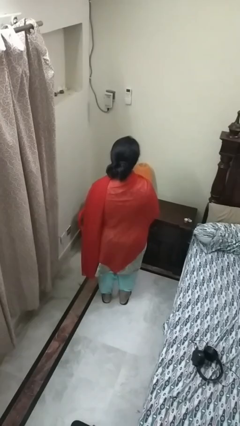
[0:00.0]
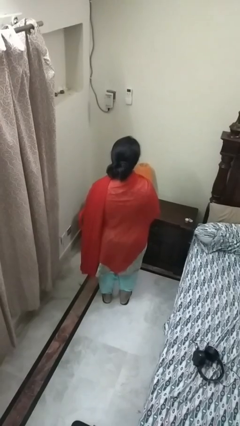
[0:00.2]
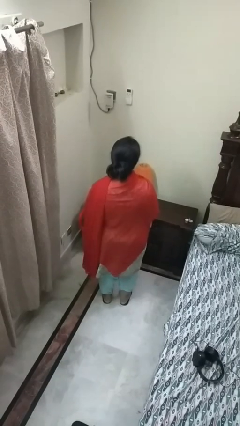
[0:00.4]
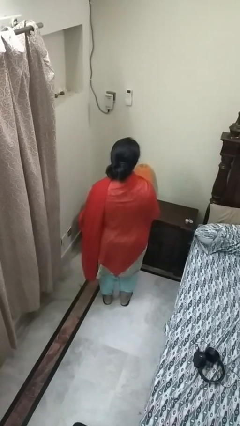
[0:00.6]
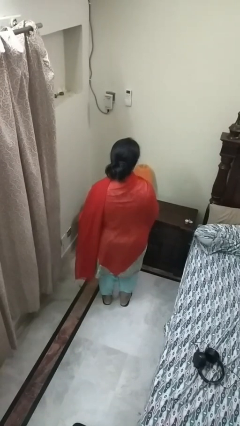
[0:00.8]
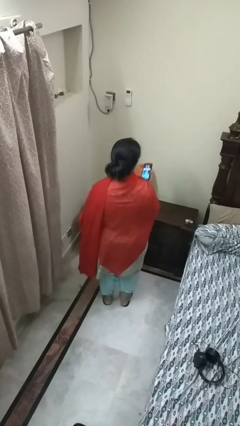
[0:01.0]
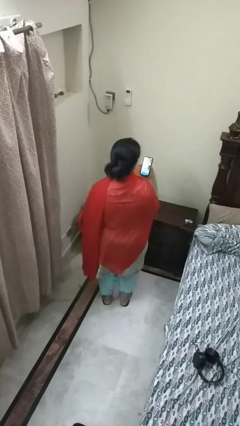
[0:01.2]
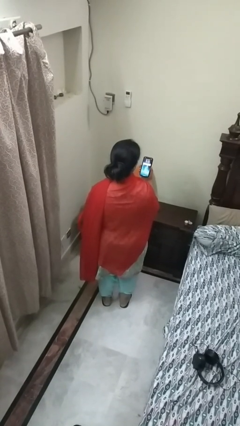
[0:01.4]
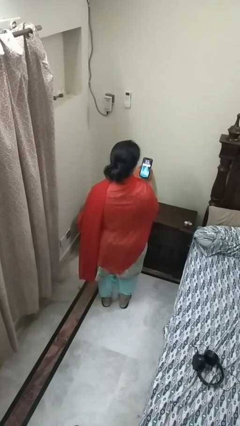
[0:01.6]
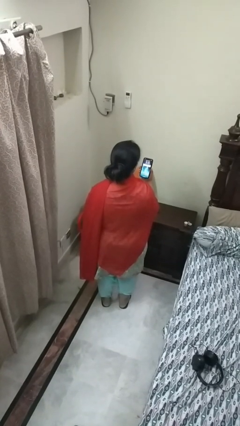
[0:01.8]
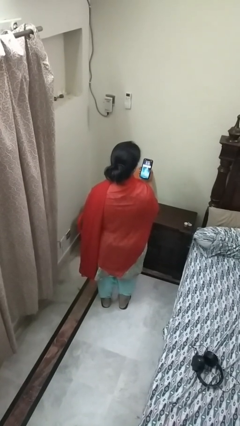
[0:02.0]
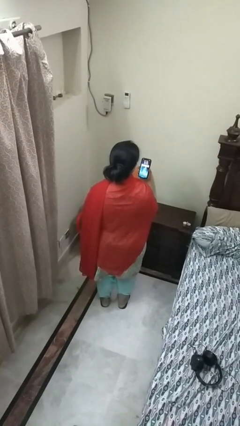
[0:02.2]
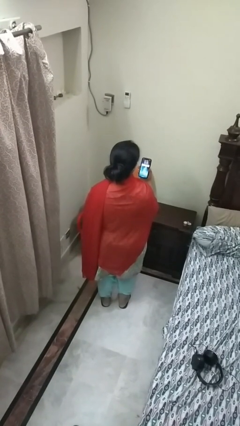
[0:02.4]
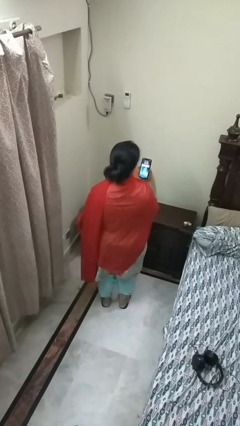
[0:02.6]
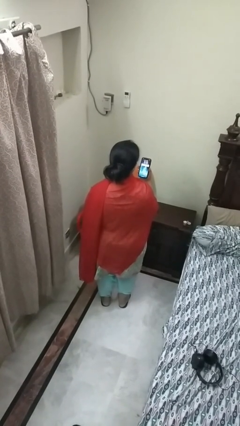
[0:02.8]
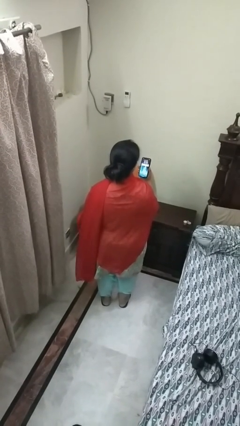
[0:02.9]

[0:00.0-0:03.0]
person takes phone from pocket

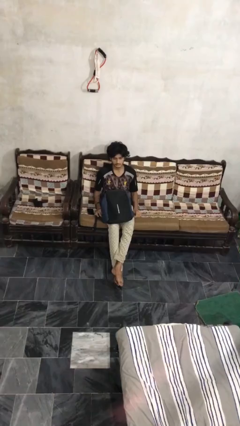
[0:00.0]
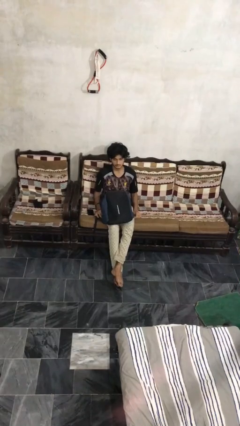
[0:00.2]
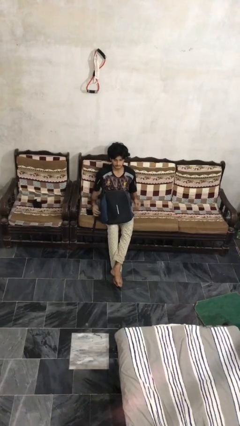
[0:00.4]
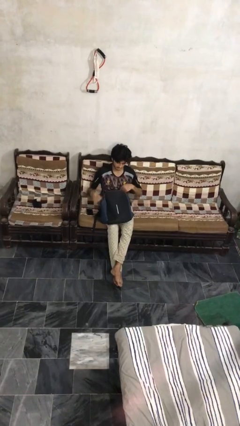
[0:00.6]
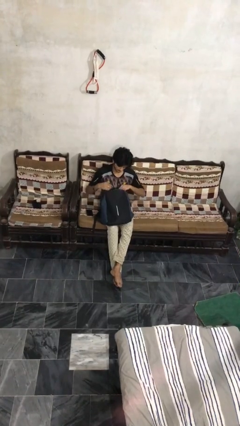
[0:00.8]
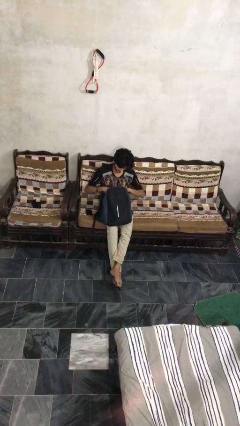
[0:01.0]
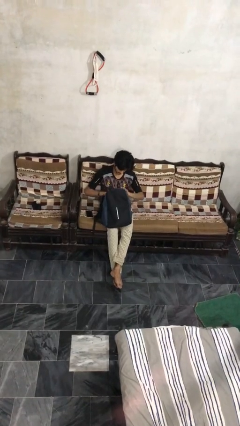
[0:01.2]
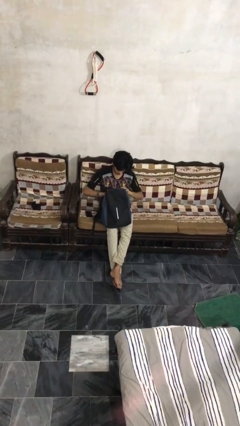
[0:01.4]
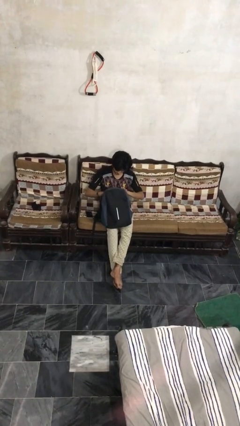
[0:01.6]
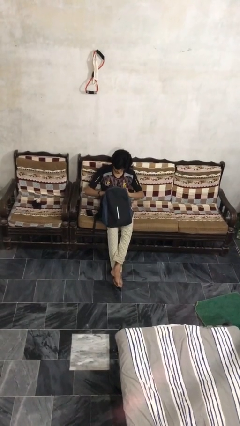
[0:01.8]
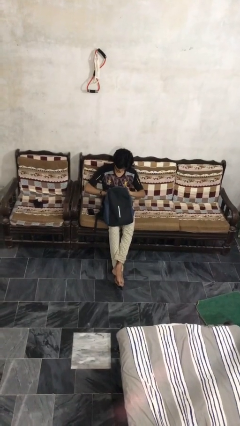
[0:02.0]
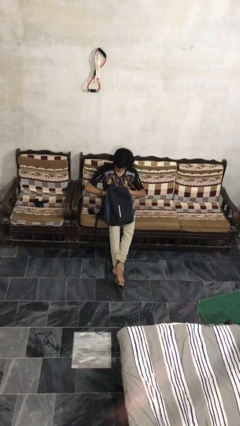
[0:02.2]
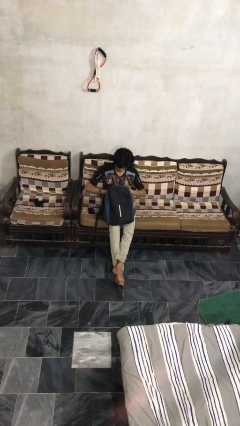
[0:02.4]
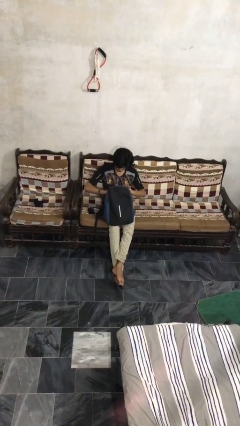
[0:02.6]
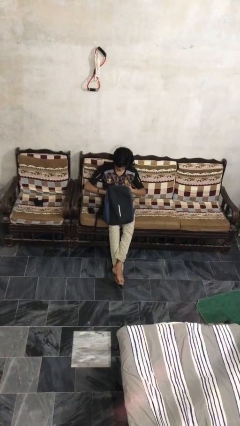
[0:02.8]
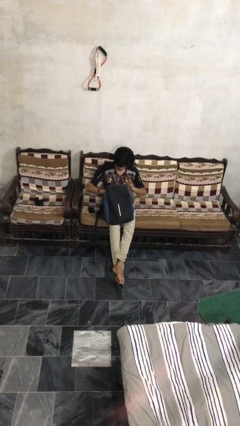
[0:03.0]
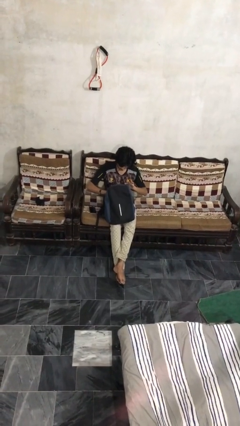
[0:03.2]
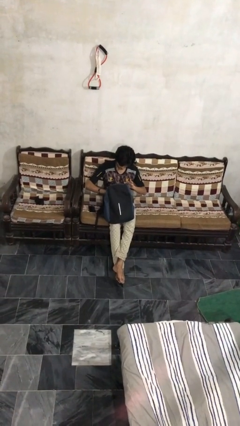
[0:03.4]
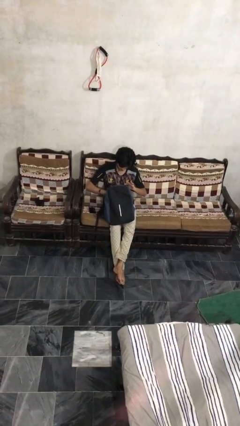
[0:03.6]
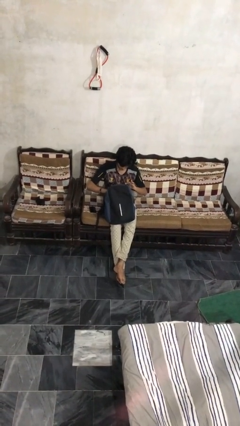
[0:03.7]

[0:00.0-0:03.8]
person searches in backpack

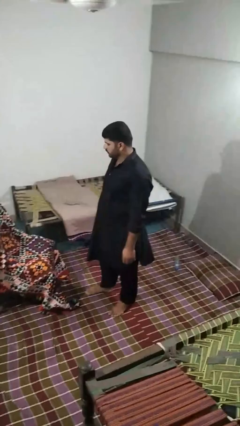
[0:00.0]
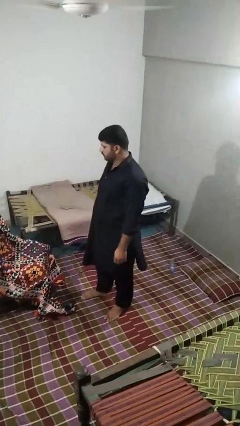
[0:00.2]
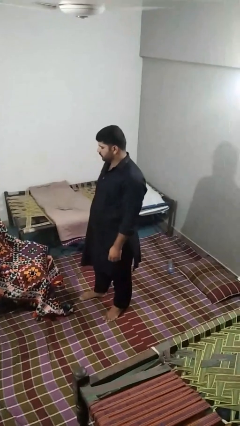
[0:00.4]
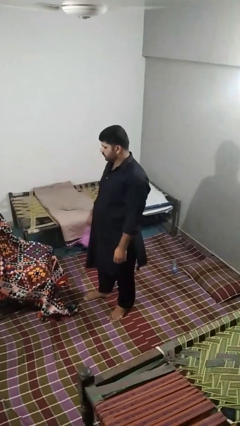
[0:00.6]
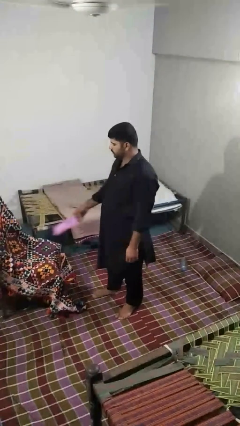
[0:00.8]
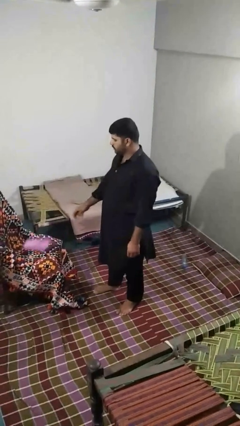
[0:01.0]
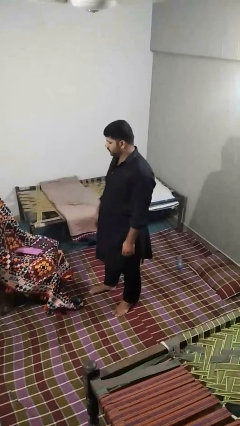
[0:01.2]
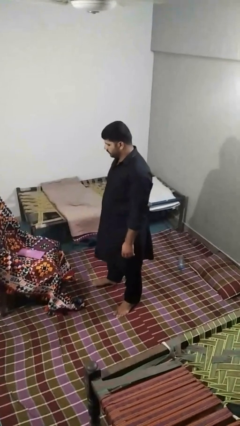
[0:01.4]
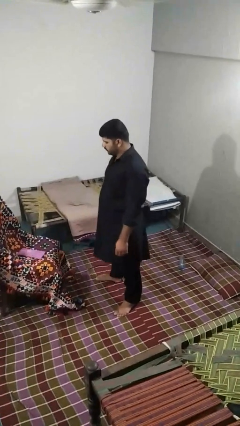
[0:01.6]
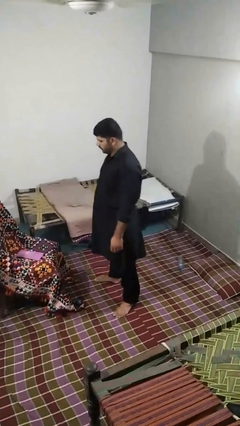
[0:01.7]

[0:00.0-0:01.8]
person puts down object on couch

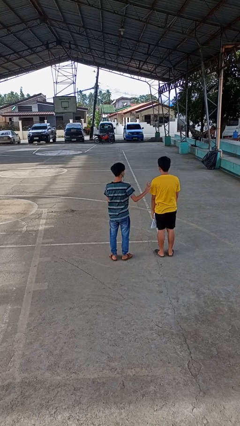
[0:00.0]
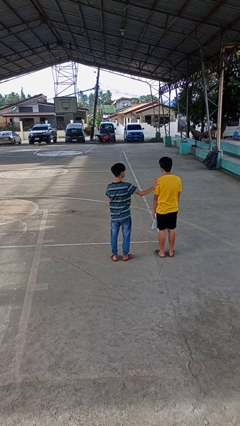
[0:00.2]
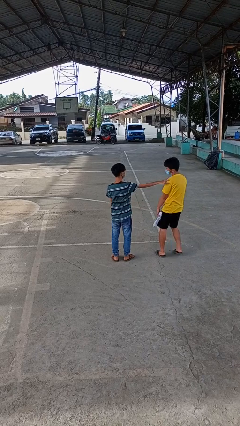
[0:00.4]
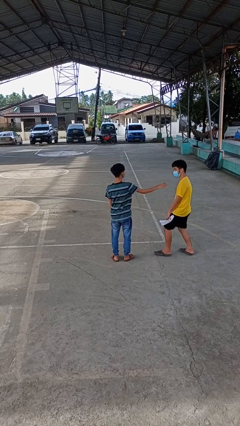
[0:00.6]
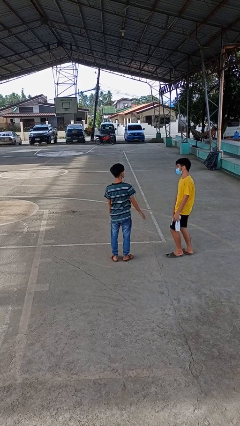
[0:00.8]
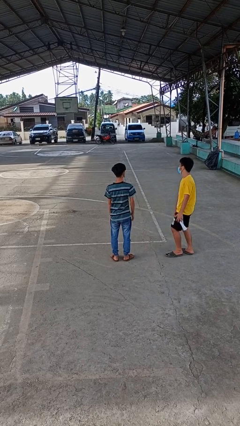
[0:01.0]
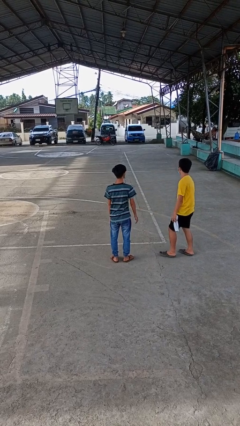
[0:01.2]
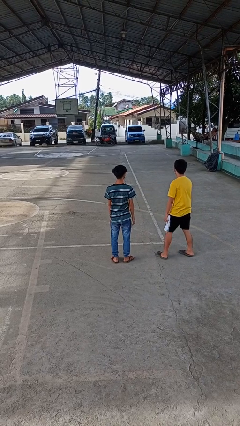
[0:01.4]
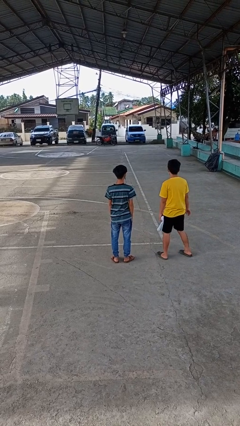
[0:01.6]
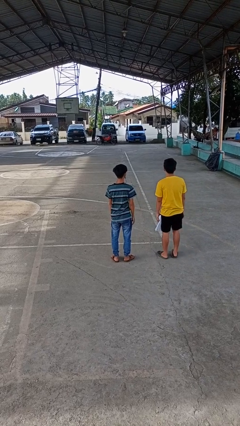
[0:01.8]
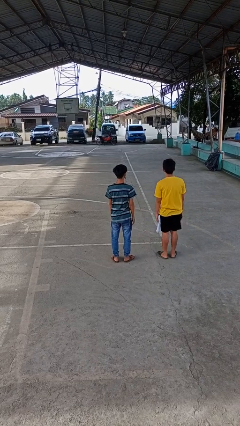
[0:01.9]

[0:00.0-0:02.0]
person shoves person

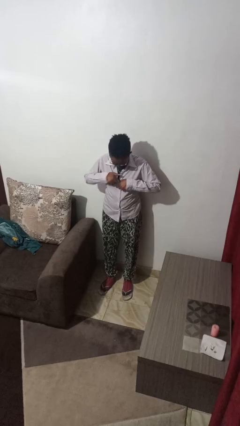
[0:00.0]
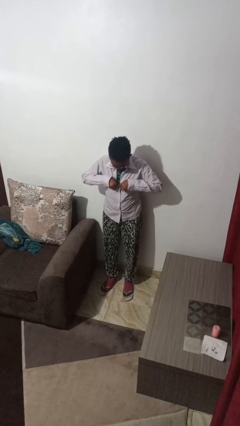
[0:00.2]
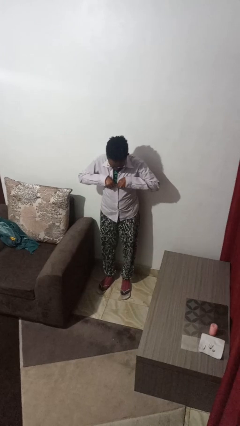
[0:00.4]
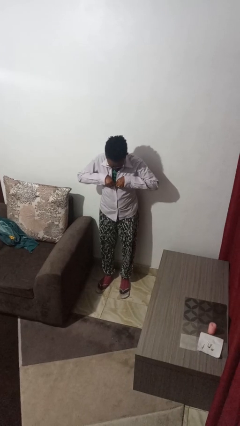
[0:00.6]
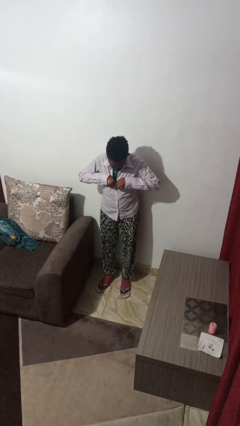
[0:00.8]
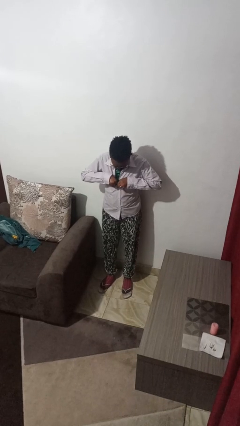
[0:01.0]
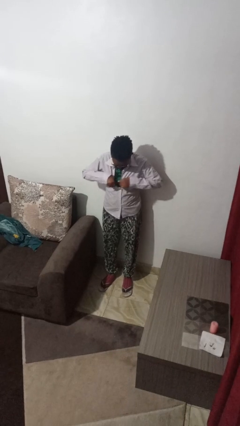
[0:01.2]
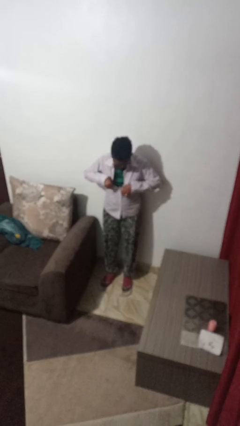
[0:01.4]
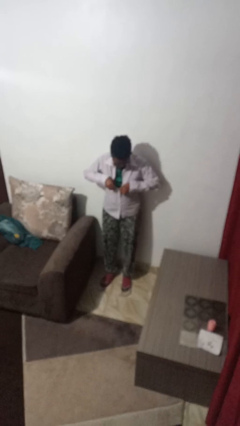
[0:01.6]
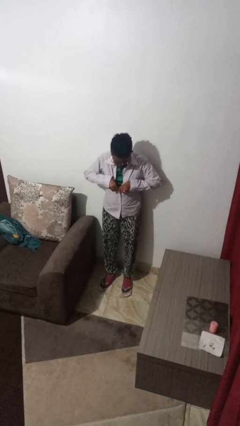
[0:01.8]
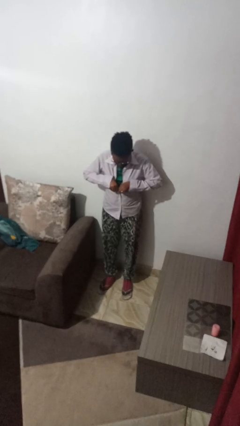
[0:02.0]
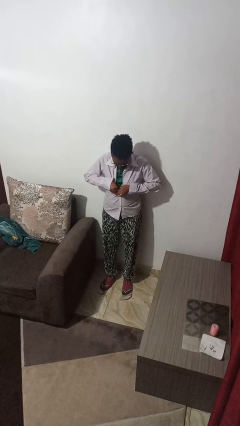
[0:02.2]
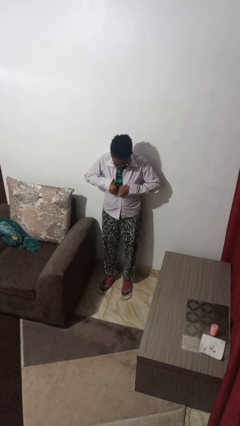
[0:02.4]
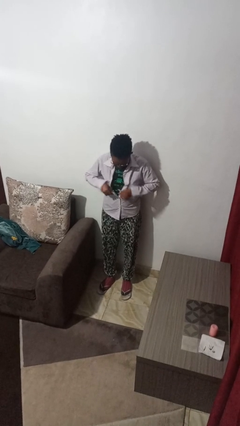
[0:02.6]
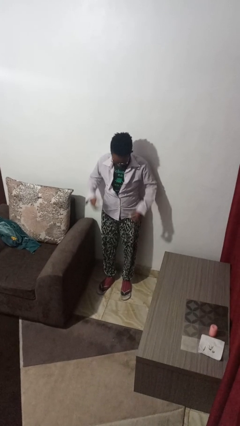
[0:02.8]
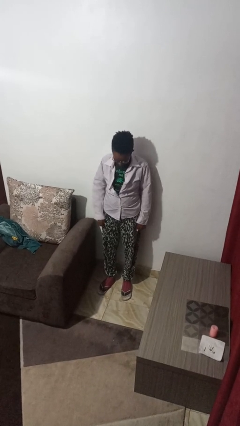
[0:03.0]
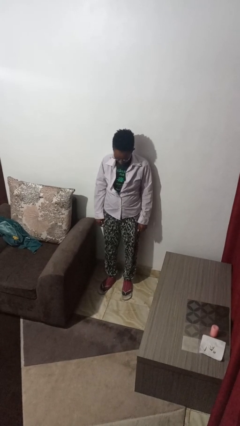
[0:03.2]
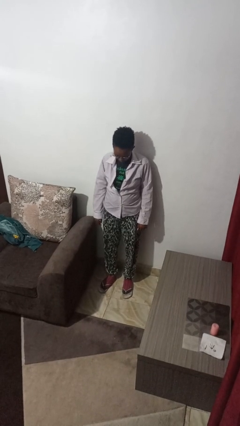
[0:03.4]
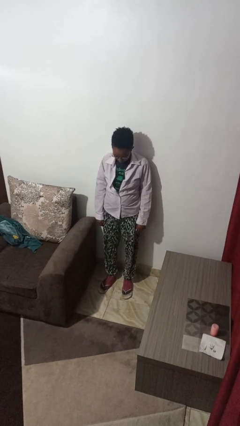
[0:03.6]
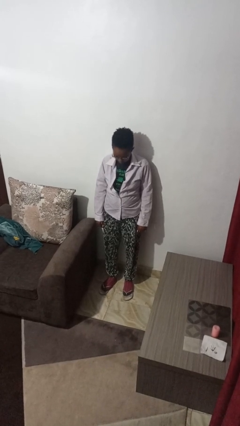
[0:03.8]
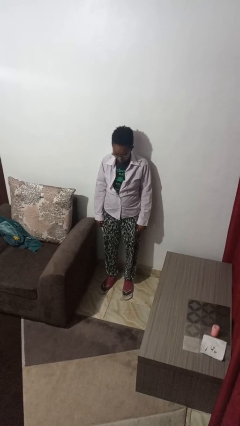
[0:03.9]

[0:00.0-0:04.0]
person unbuttons shirt

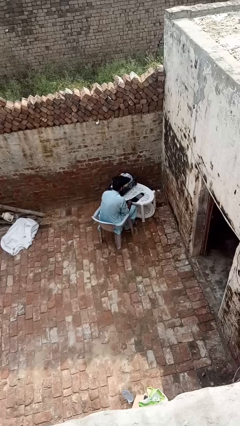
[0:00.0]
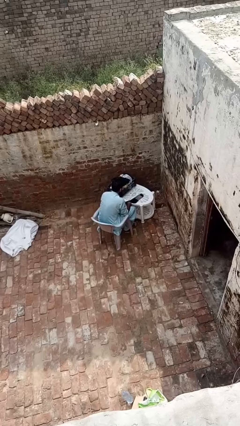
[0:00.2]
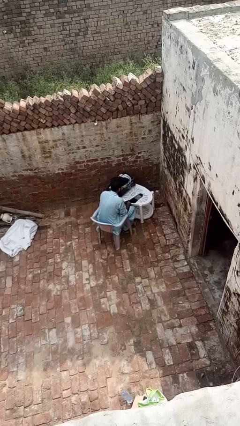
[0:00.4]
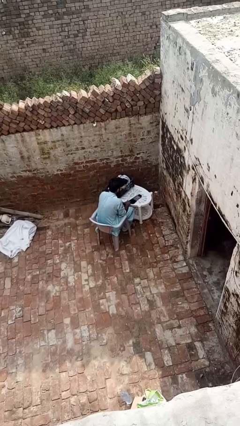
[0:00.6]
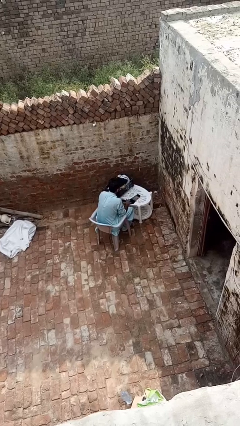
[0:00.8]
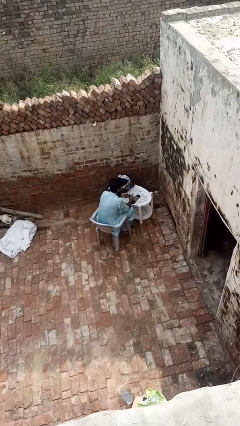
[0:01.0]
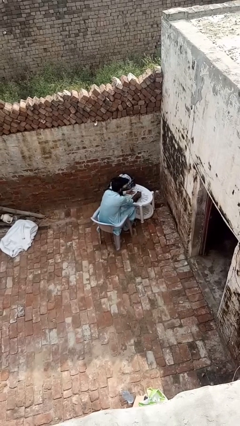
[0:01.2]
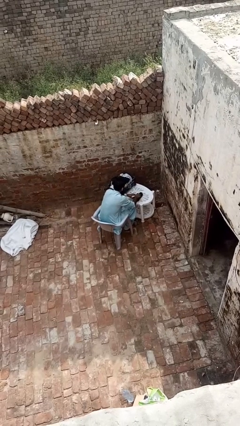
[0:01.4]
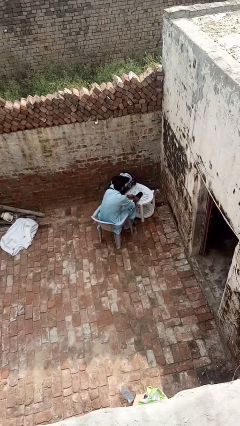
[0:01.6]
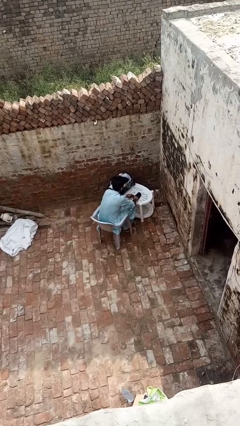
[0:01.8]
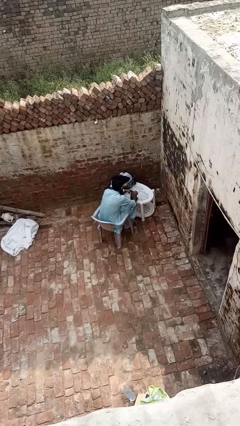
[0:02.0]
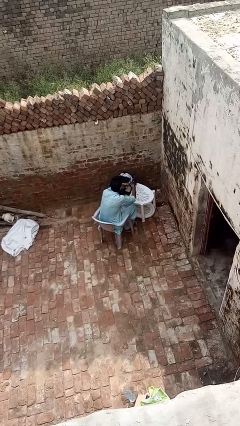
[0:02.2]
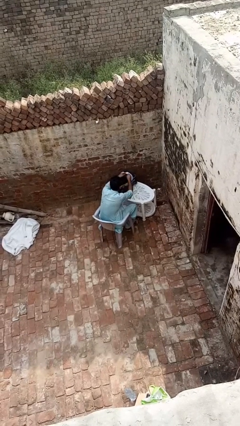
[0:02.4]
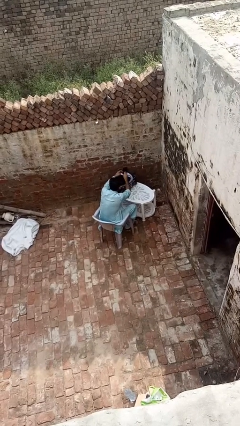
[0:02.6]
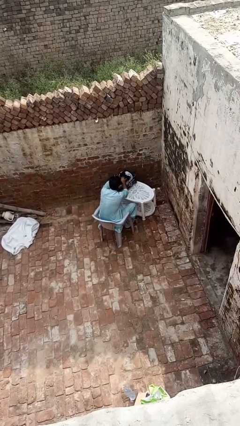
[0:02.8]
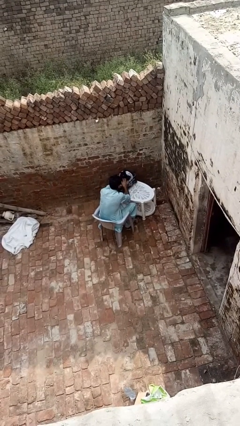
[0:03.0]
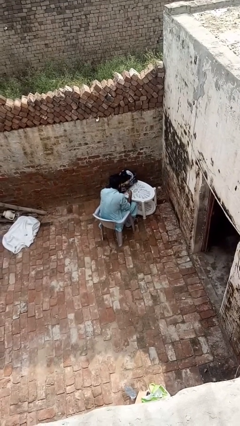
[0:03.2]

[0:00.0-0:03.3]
person folds socks
